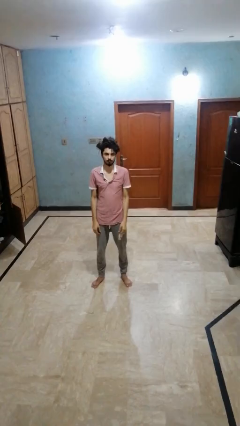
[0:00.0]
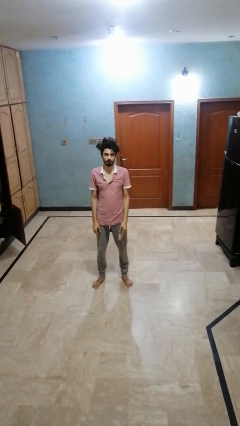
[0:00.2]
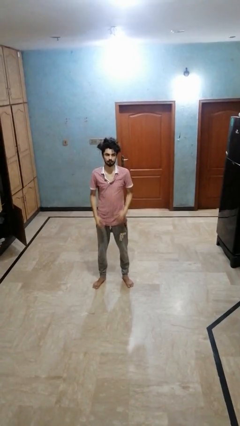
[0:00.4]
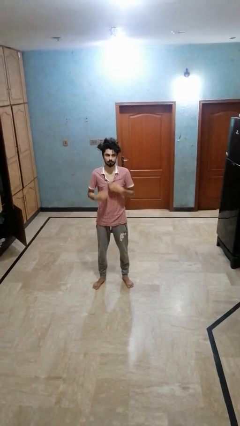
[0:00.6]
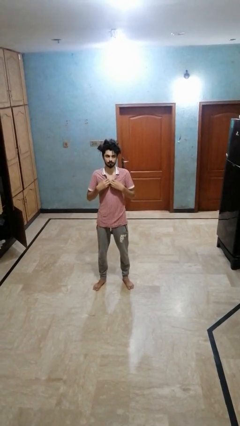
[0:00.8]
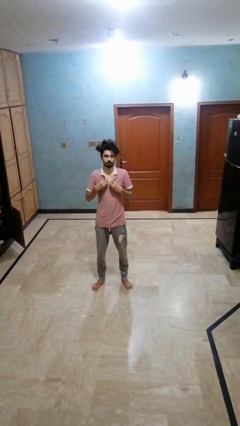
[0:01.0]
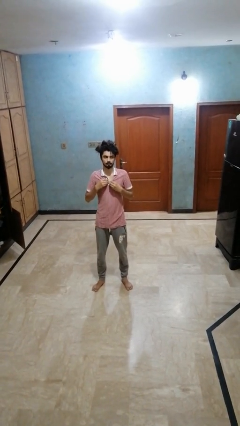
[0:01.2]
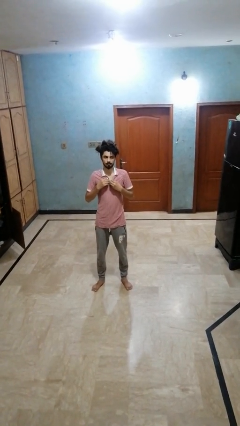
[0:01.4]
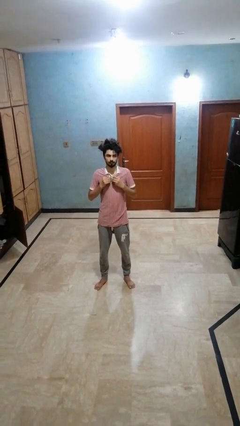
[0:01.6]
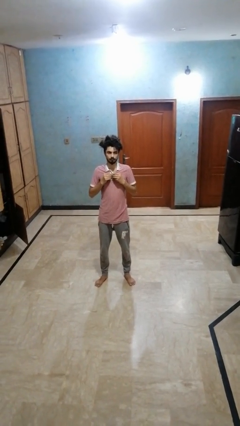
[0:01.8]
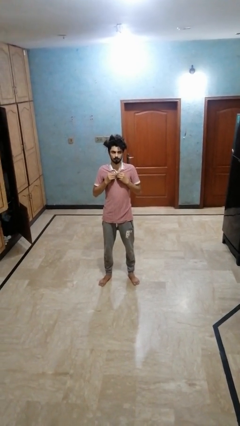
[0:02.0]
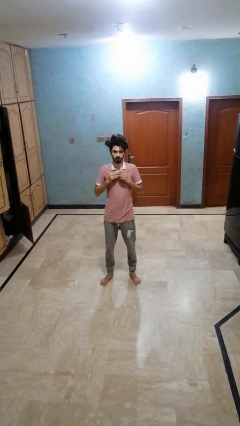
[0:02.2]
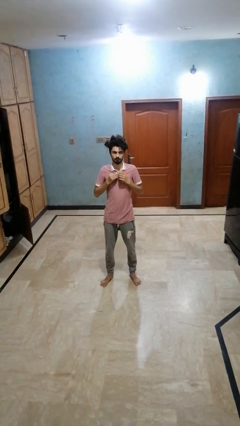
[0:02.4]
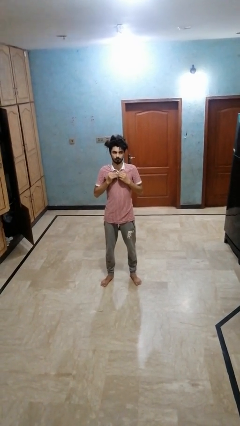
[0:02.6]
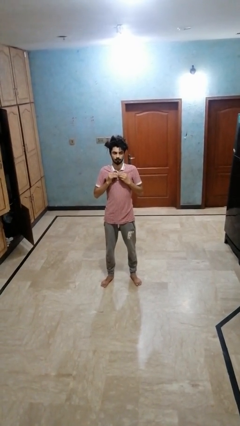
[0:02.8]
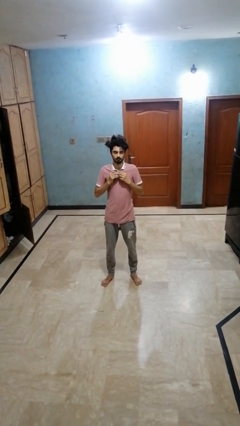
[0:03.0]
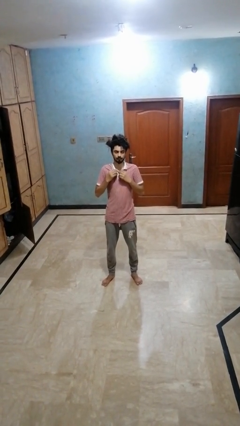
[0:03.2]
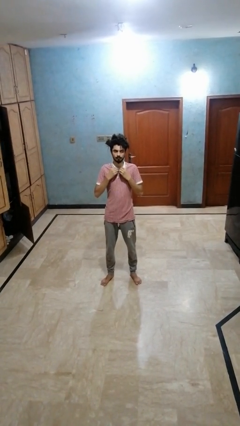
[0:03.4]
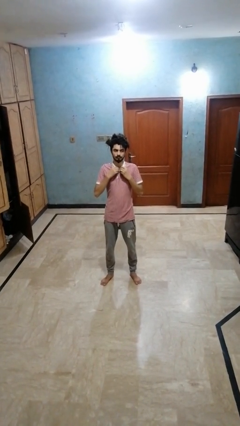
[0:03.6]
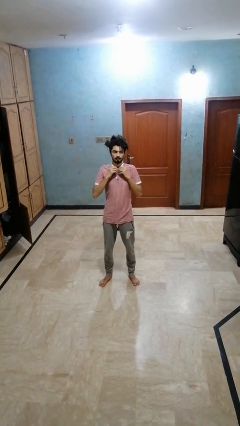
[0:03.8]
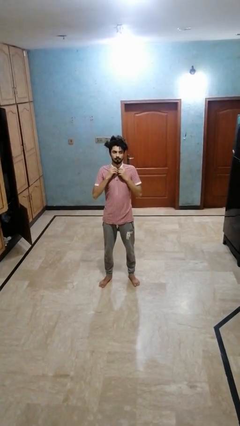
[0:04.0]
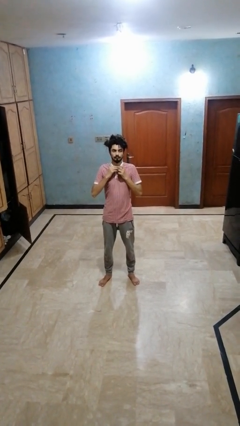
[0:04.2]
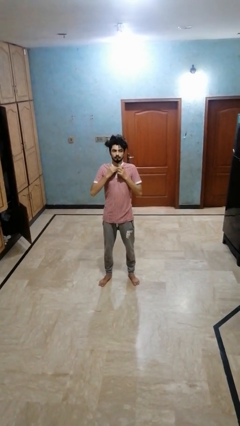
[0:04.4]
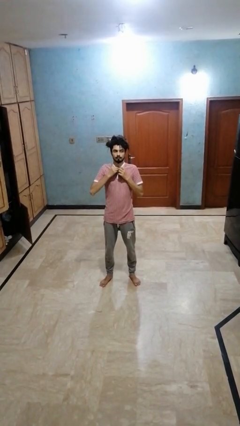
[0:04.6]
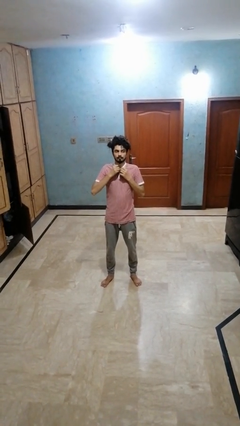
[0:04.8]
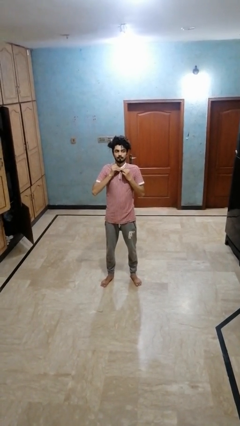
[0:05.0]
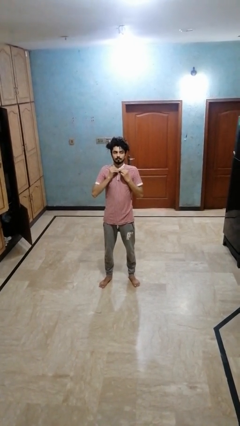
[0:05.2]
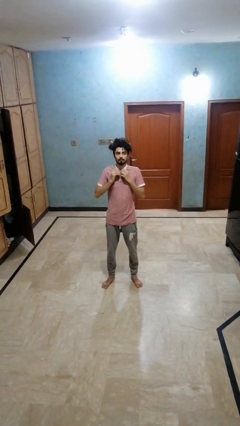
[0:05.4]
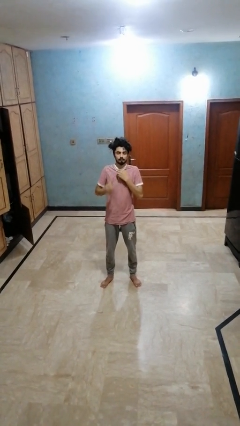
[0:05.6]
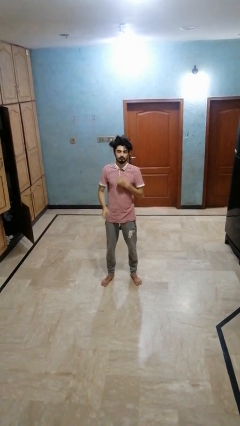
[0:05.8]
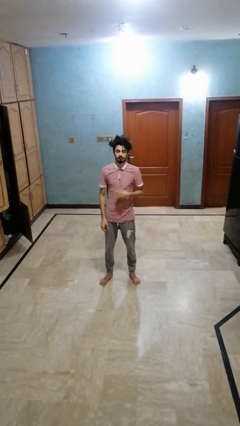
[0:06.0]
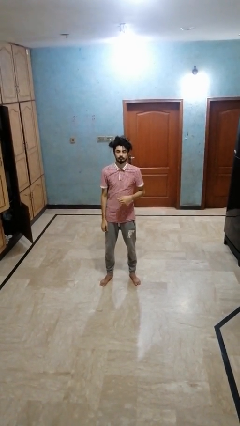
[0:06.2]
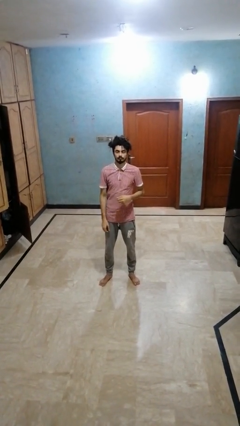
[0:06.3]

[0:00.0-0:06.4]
person buttons shirt

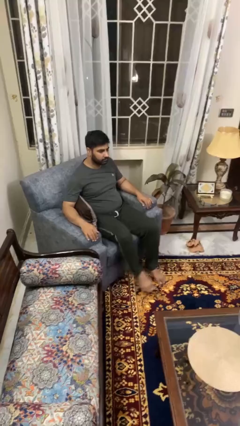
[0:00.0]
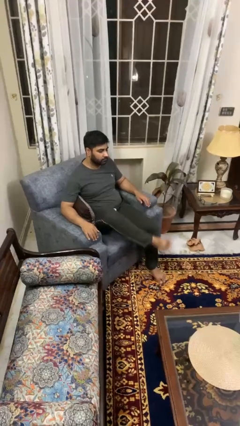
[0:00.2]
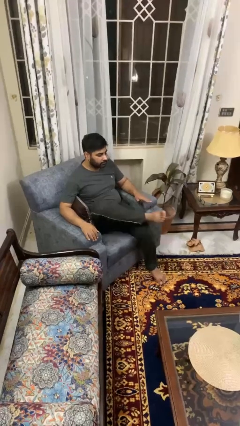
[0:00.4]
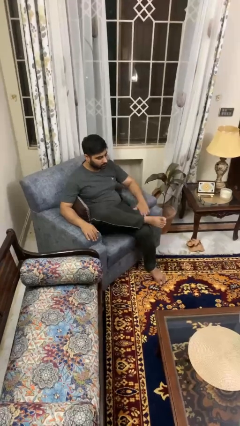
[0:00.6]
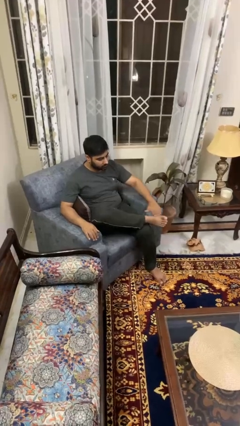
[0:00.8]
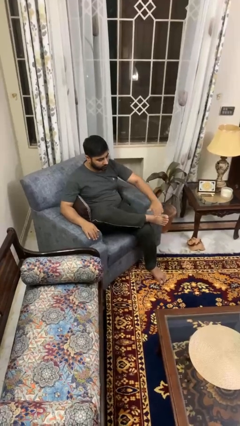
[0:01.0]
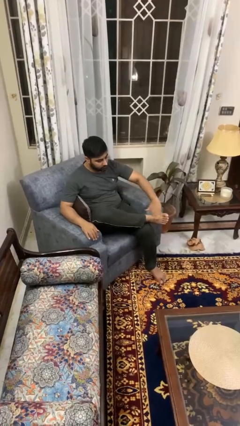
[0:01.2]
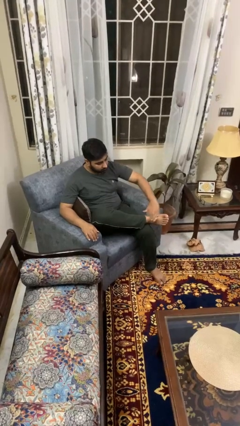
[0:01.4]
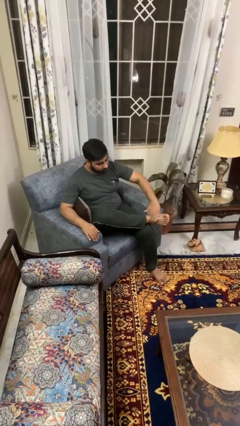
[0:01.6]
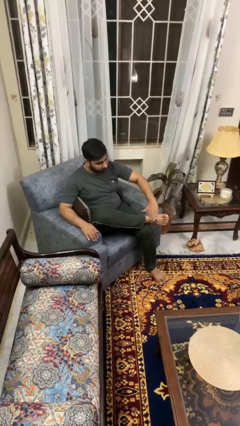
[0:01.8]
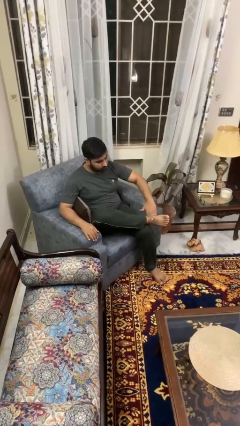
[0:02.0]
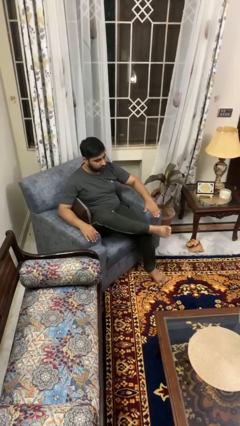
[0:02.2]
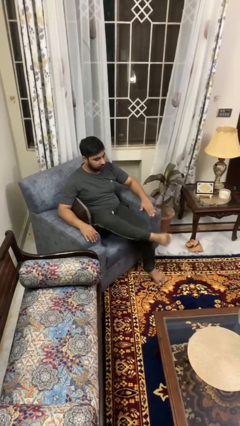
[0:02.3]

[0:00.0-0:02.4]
person rubs foot

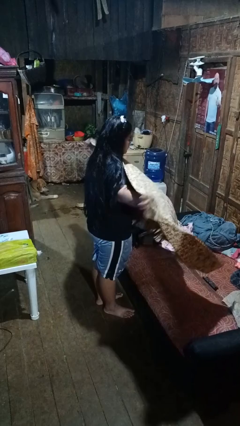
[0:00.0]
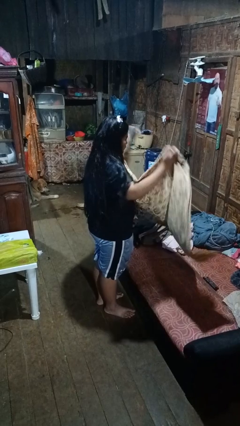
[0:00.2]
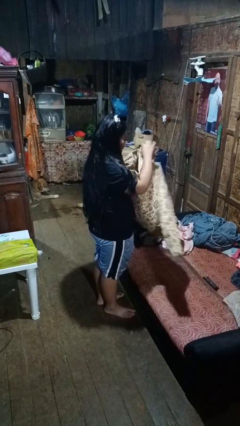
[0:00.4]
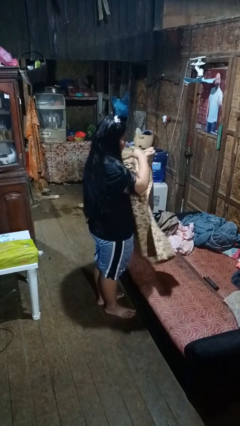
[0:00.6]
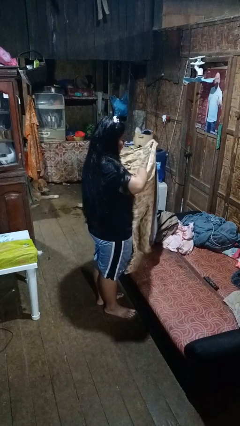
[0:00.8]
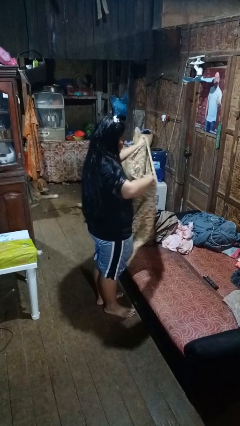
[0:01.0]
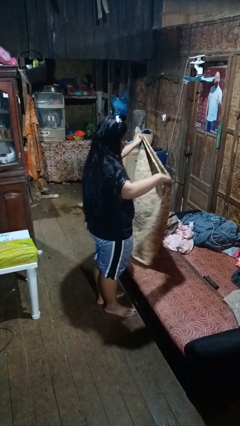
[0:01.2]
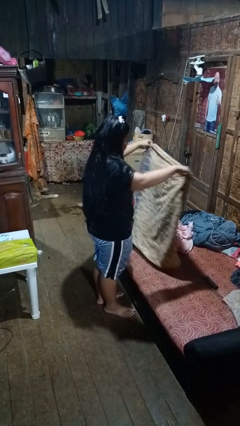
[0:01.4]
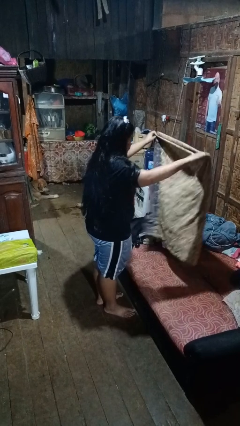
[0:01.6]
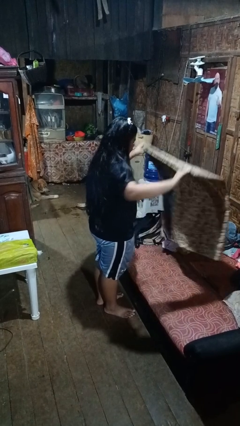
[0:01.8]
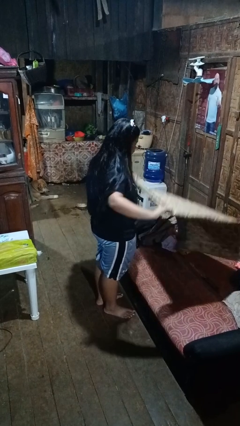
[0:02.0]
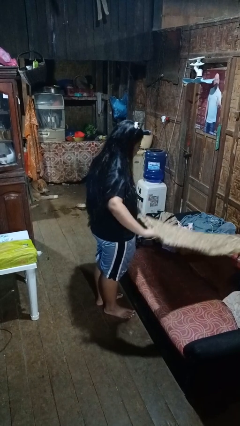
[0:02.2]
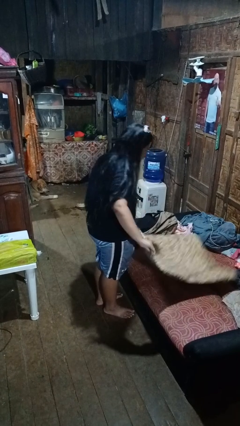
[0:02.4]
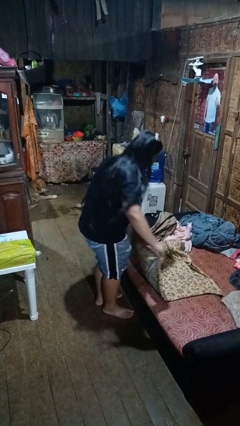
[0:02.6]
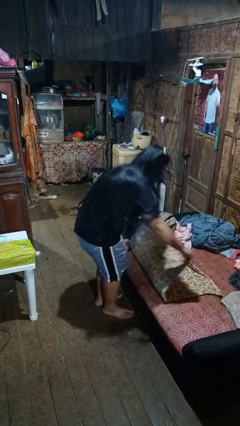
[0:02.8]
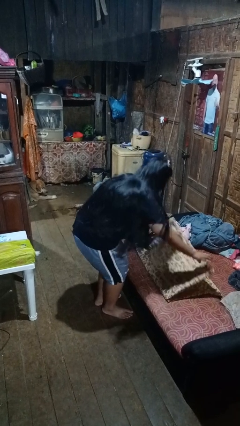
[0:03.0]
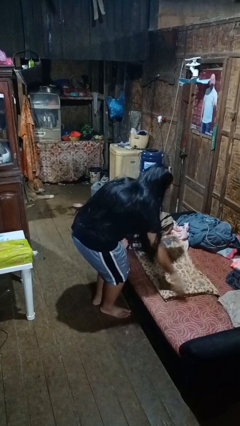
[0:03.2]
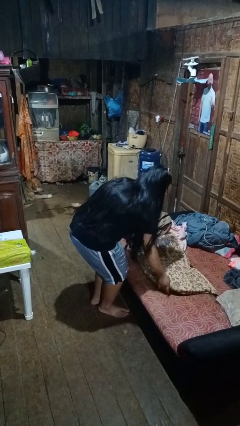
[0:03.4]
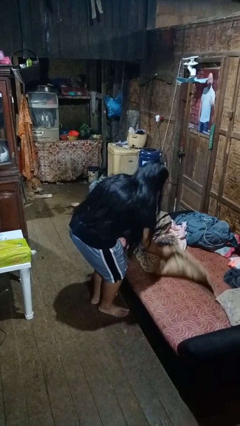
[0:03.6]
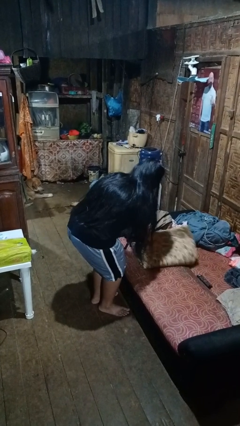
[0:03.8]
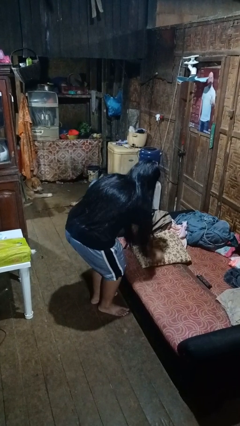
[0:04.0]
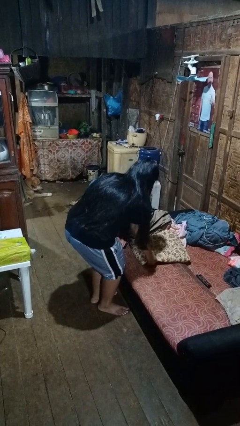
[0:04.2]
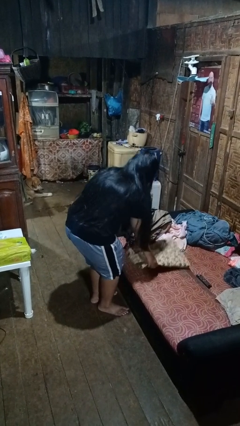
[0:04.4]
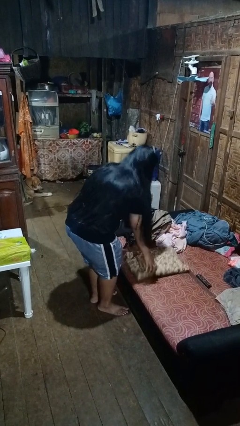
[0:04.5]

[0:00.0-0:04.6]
person folds blanket

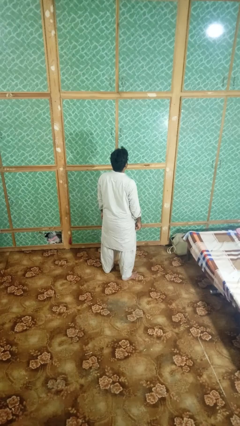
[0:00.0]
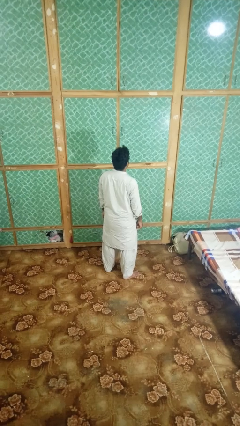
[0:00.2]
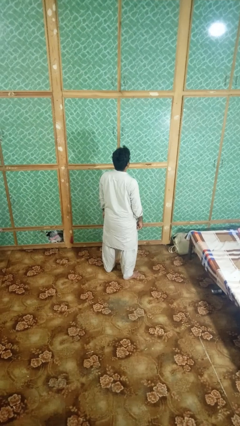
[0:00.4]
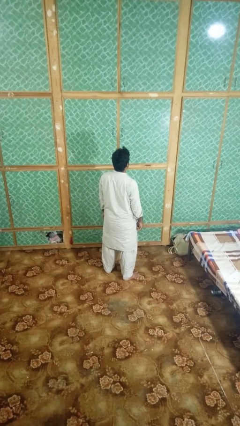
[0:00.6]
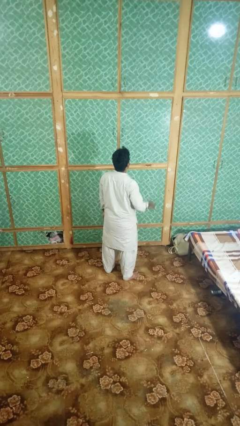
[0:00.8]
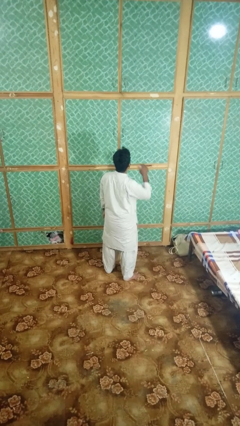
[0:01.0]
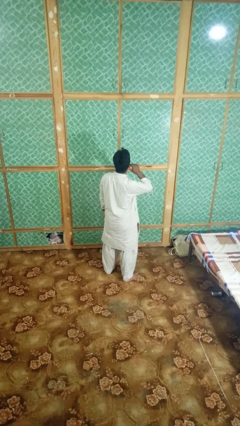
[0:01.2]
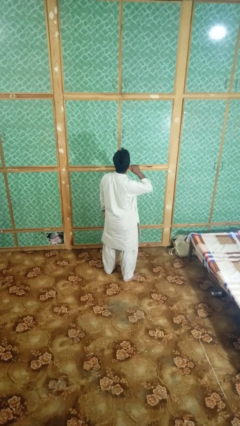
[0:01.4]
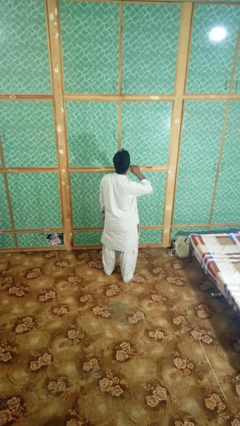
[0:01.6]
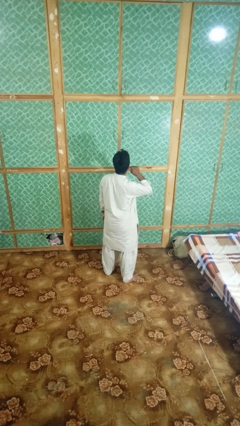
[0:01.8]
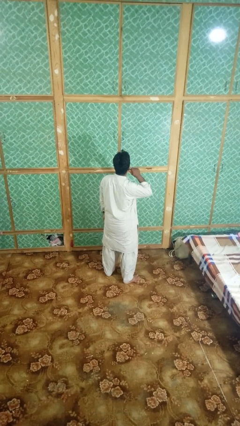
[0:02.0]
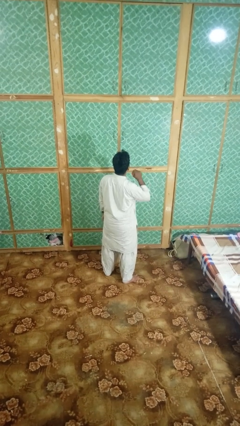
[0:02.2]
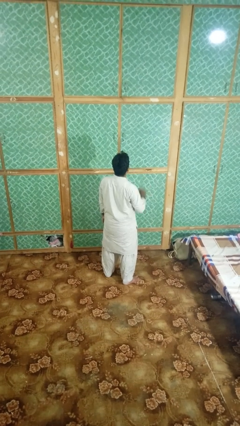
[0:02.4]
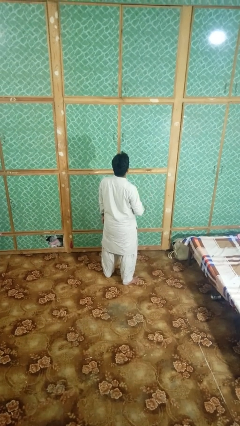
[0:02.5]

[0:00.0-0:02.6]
person touches earlobe

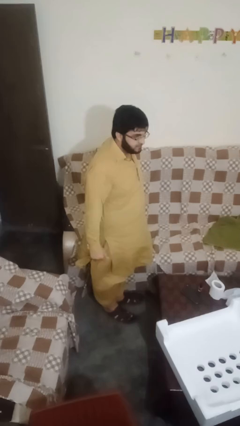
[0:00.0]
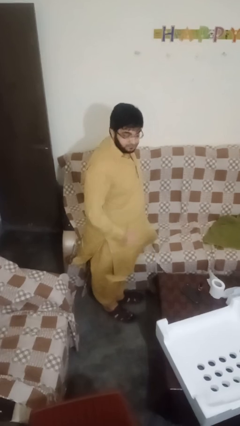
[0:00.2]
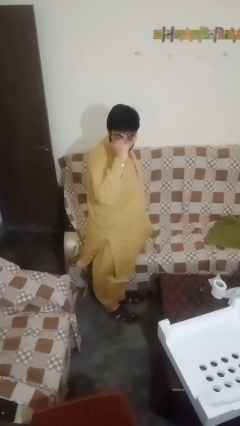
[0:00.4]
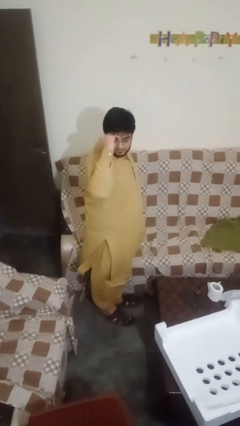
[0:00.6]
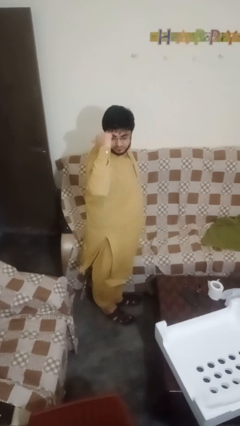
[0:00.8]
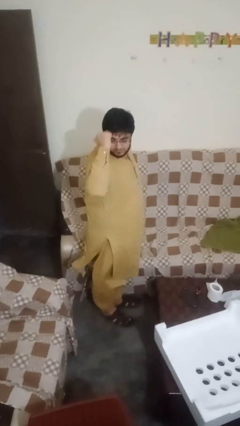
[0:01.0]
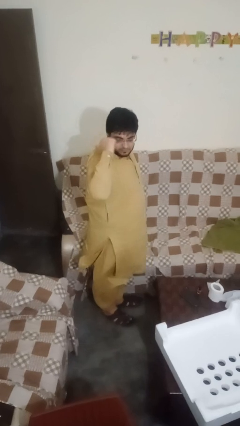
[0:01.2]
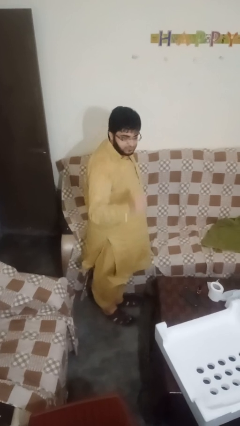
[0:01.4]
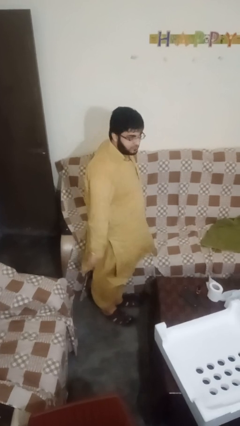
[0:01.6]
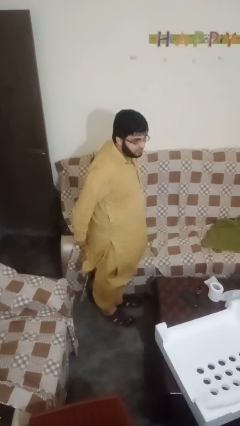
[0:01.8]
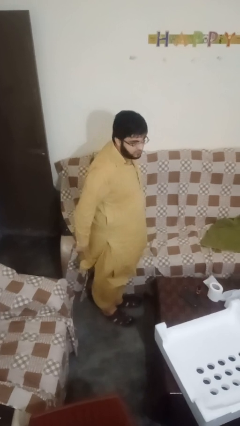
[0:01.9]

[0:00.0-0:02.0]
person gestures behind me
